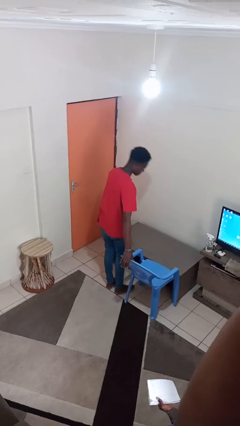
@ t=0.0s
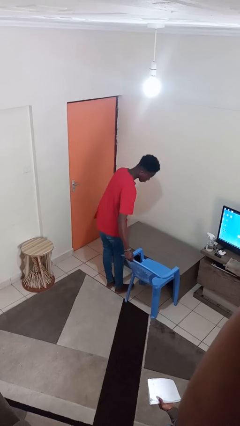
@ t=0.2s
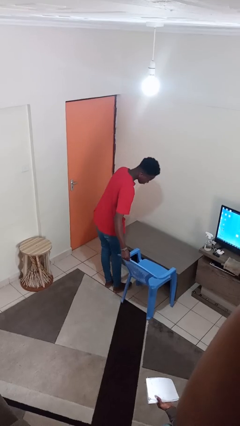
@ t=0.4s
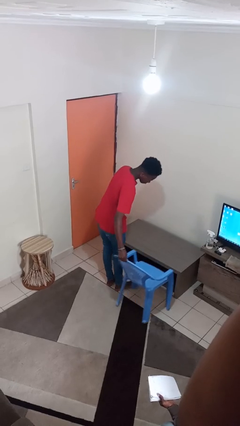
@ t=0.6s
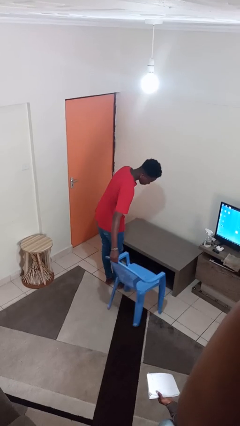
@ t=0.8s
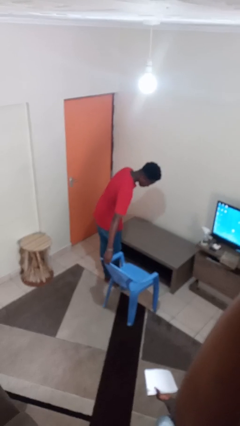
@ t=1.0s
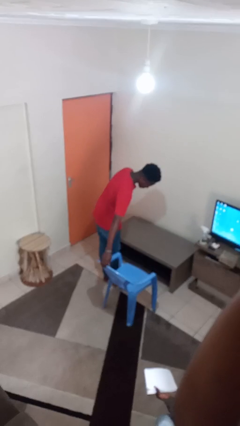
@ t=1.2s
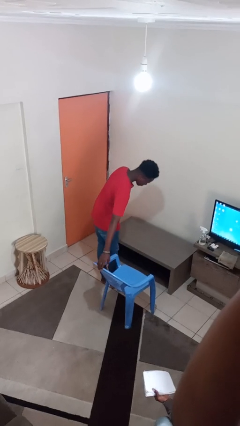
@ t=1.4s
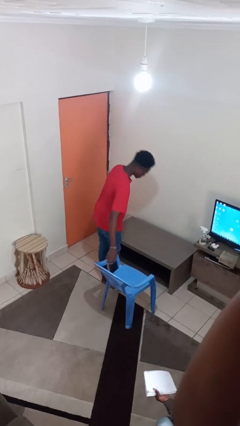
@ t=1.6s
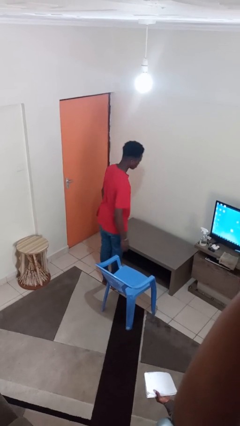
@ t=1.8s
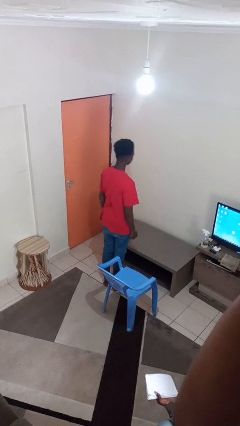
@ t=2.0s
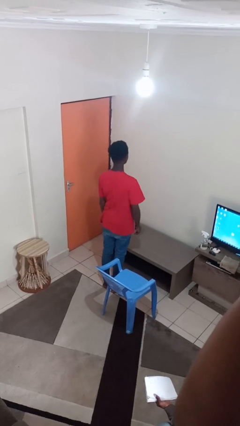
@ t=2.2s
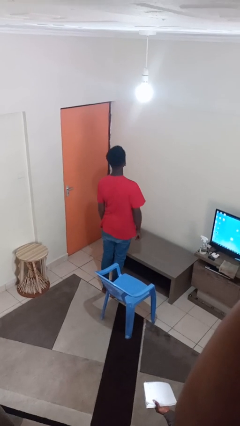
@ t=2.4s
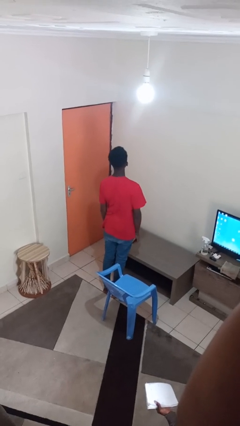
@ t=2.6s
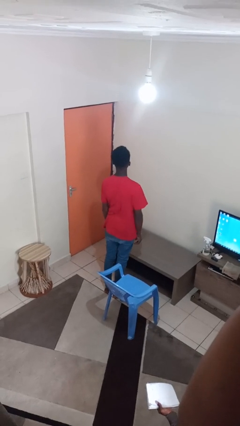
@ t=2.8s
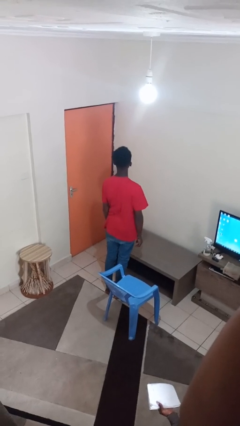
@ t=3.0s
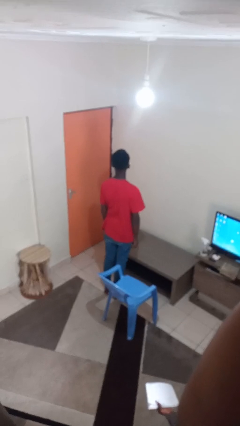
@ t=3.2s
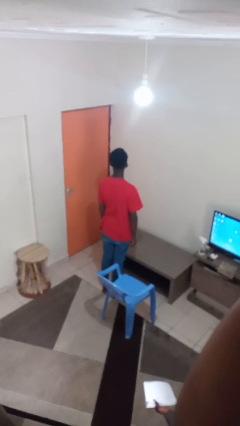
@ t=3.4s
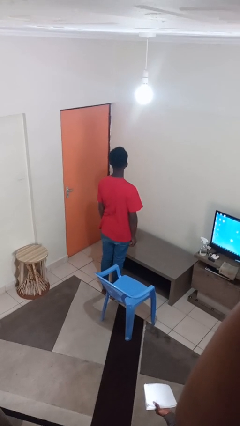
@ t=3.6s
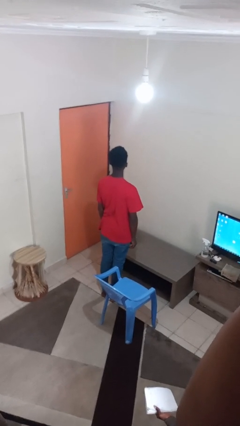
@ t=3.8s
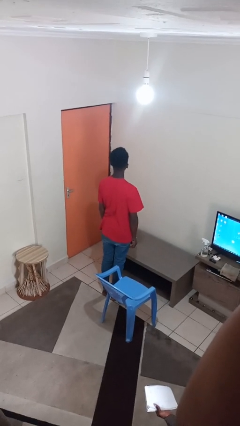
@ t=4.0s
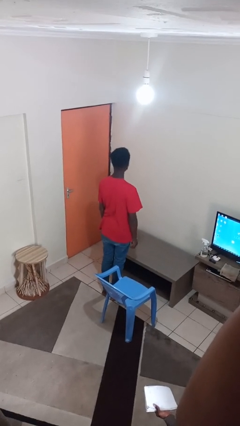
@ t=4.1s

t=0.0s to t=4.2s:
person pulls out chair

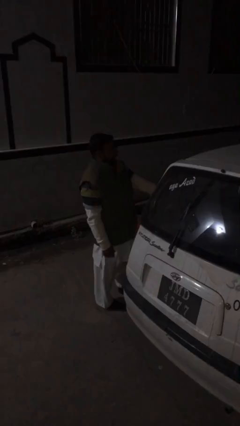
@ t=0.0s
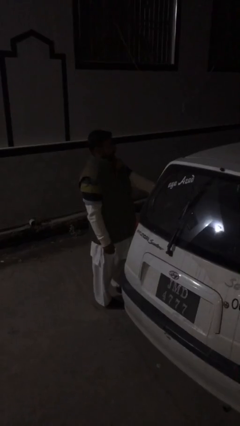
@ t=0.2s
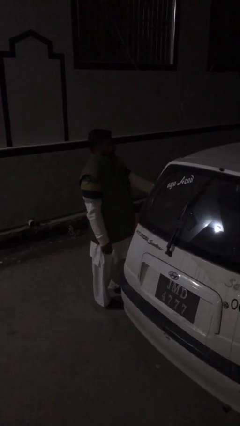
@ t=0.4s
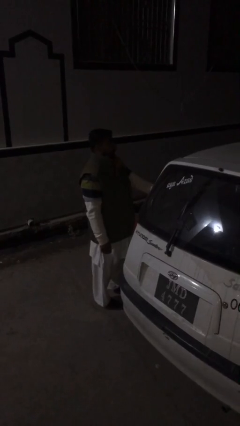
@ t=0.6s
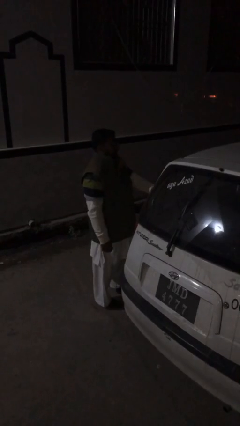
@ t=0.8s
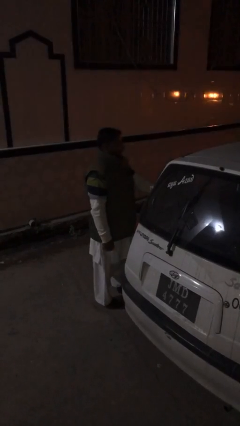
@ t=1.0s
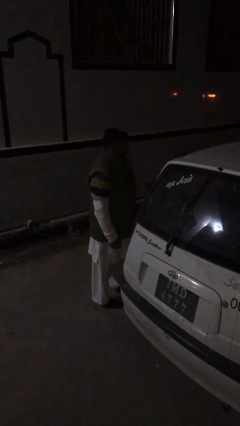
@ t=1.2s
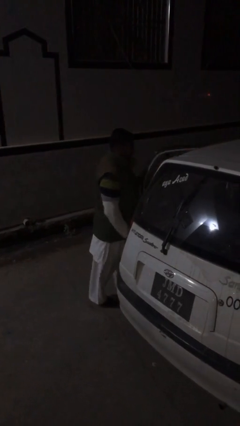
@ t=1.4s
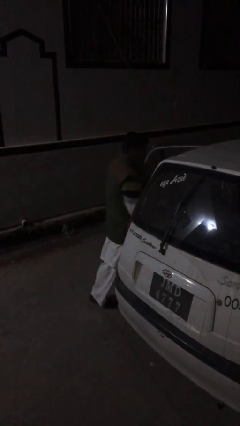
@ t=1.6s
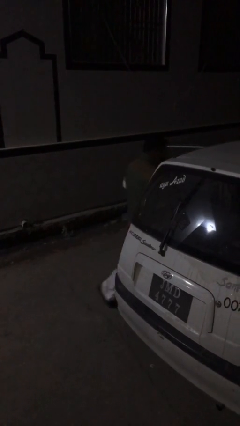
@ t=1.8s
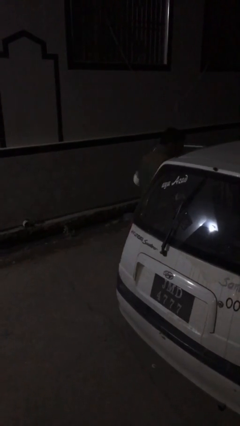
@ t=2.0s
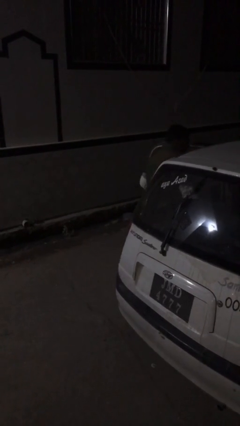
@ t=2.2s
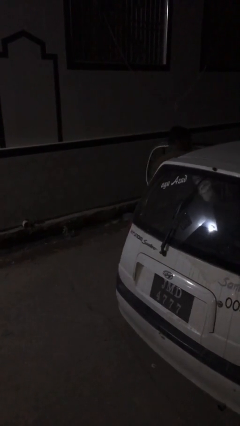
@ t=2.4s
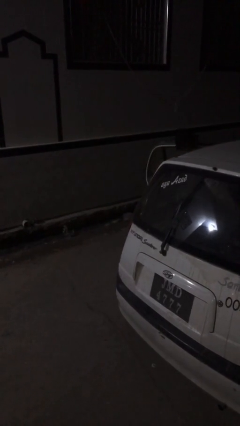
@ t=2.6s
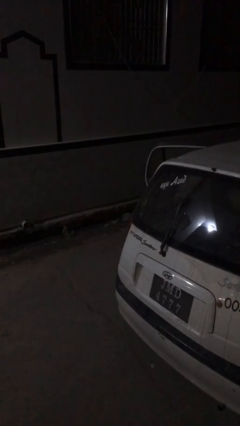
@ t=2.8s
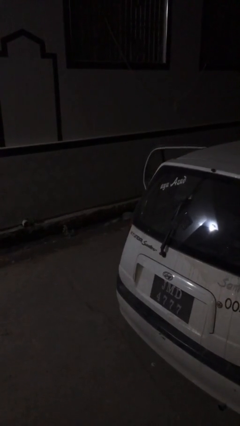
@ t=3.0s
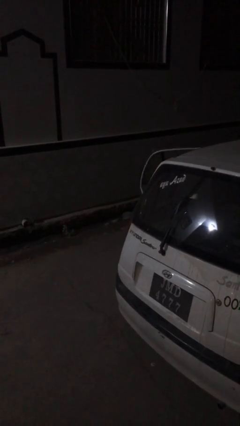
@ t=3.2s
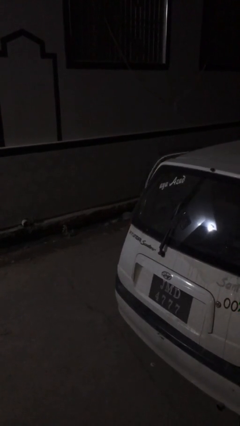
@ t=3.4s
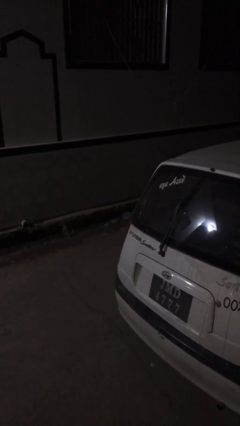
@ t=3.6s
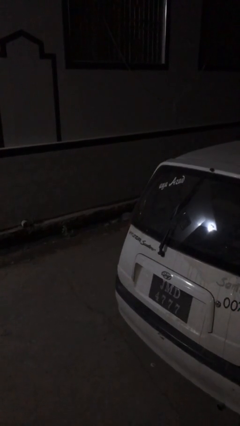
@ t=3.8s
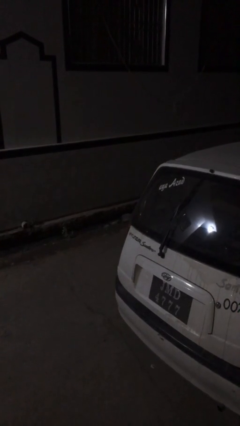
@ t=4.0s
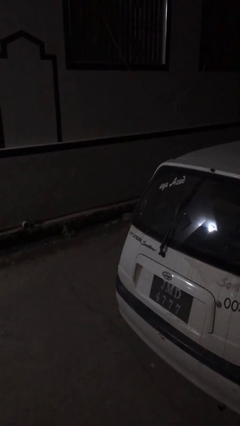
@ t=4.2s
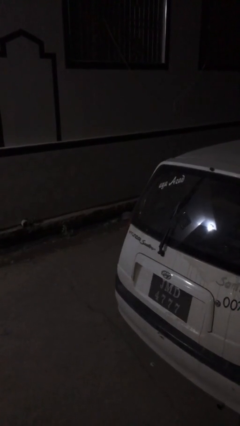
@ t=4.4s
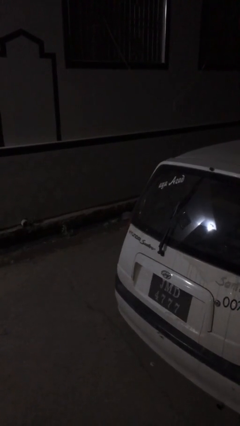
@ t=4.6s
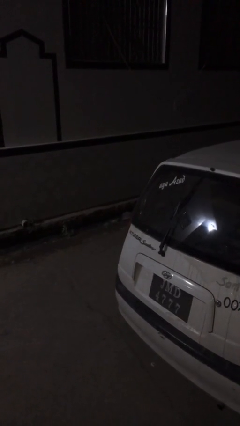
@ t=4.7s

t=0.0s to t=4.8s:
person enters car

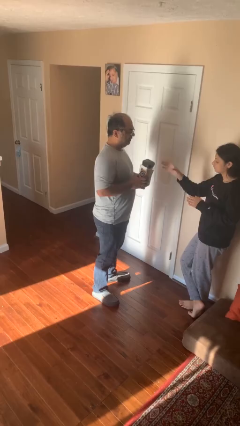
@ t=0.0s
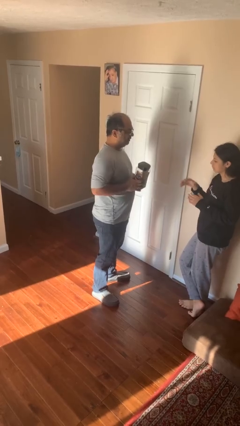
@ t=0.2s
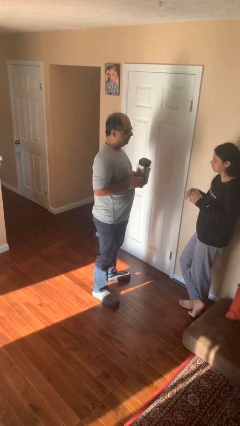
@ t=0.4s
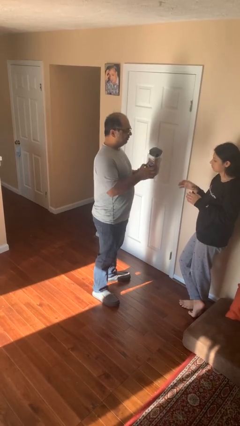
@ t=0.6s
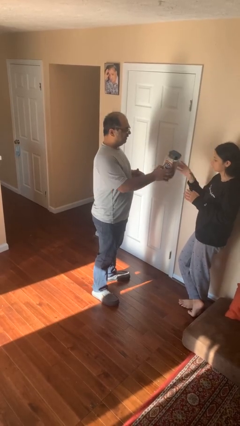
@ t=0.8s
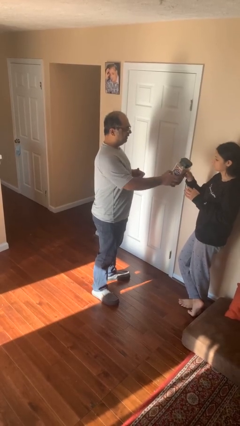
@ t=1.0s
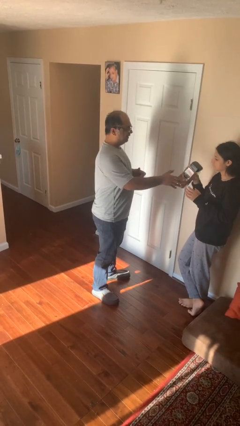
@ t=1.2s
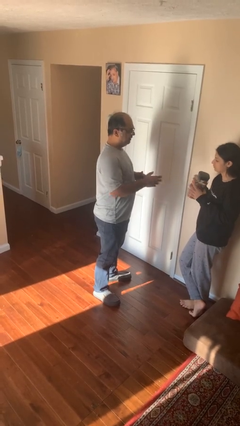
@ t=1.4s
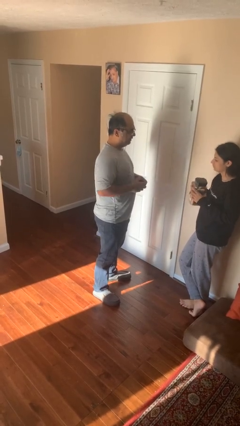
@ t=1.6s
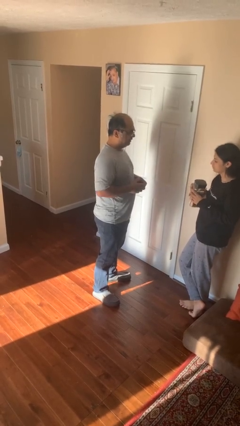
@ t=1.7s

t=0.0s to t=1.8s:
person transfers object to person

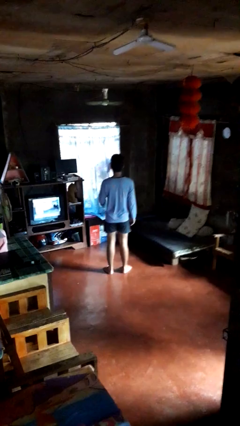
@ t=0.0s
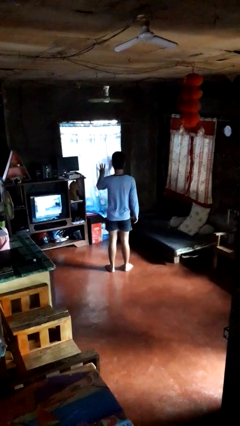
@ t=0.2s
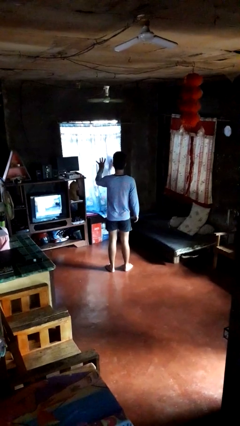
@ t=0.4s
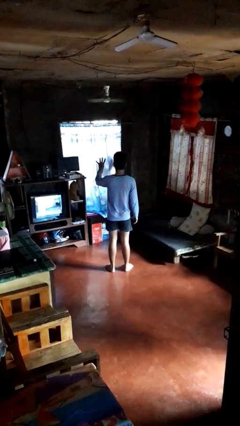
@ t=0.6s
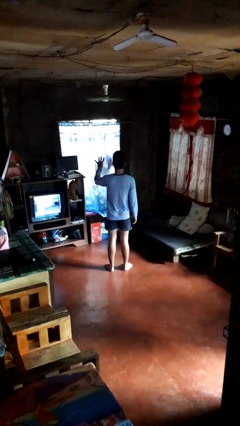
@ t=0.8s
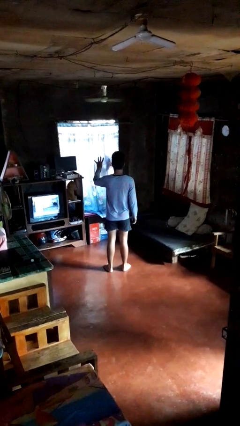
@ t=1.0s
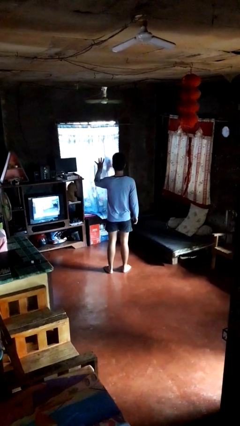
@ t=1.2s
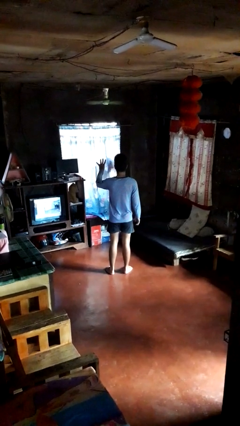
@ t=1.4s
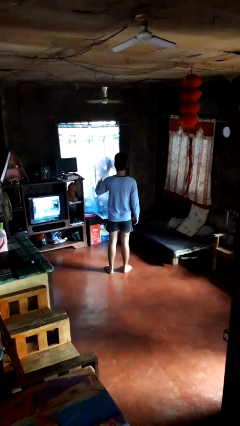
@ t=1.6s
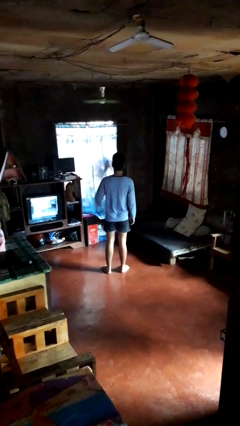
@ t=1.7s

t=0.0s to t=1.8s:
person gestures number four

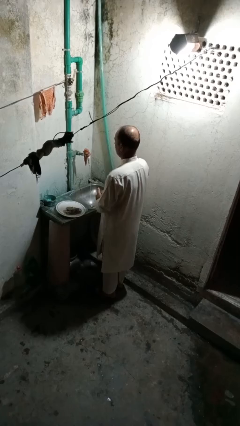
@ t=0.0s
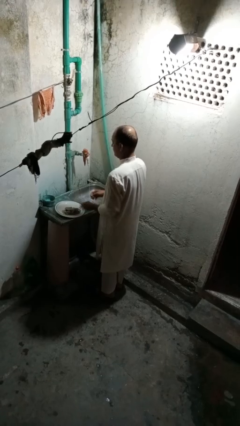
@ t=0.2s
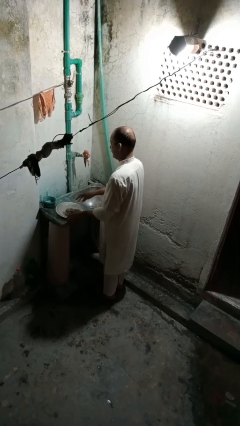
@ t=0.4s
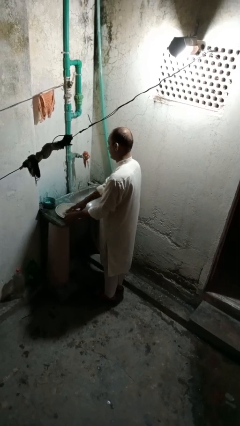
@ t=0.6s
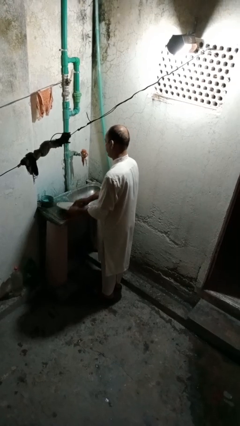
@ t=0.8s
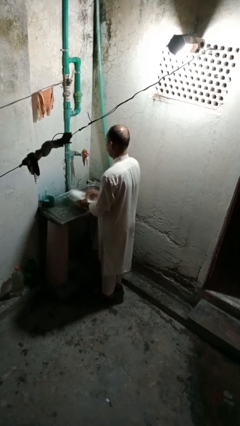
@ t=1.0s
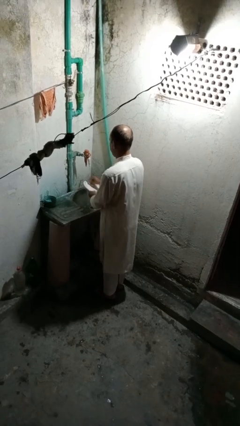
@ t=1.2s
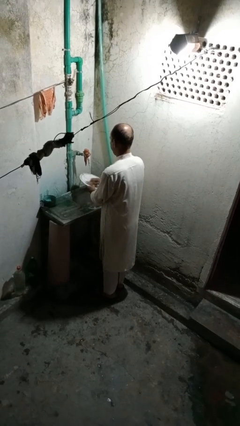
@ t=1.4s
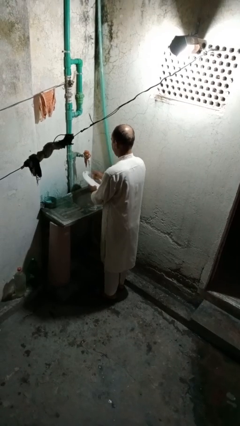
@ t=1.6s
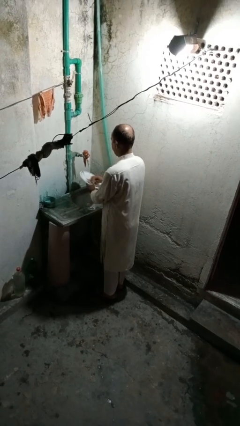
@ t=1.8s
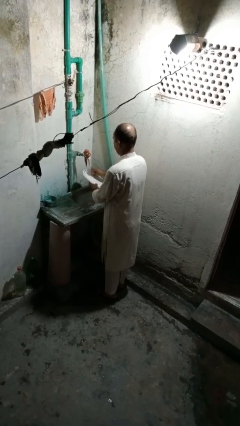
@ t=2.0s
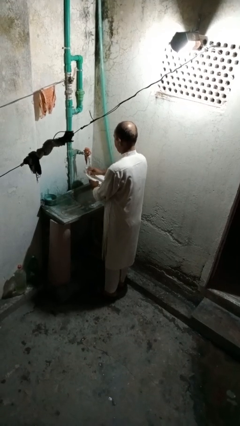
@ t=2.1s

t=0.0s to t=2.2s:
person washes dish

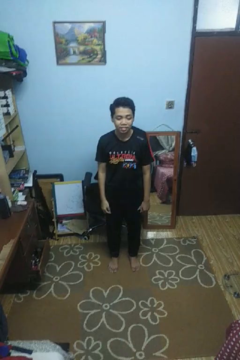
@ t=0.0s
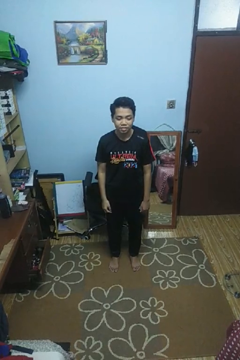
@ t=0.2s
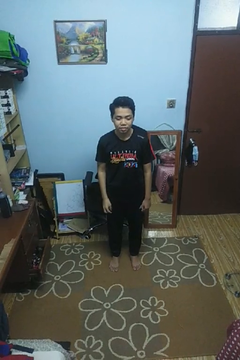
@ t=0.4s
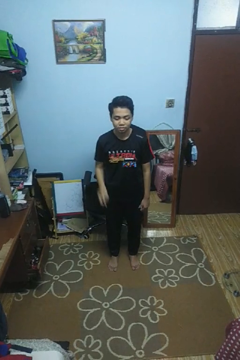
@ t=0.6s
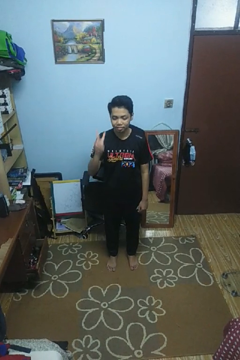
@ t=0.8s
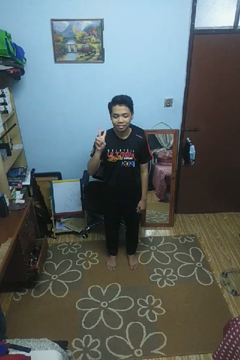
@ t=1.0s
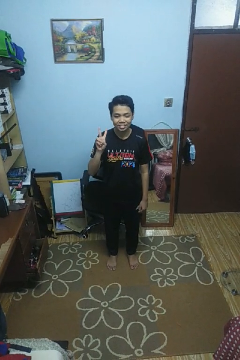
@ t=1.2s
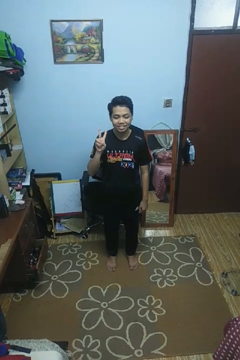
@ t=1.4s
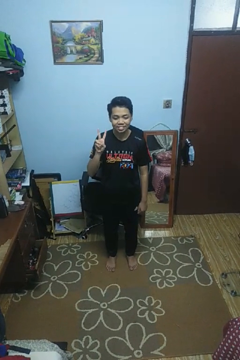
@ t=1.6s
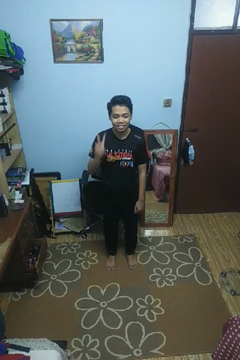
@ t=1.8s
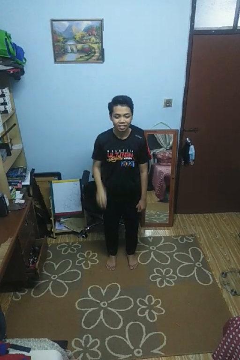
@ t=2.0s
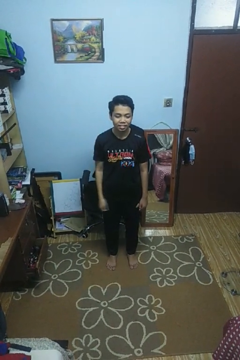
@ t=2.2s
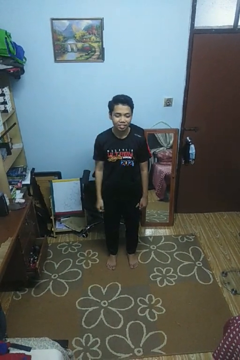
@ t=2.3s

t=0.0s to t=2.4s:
person gestures peace

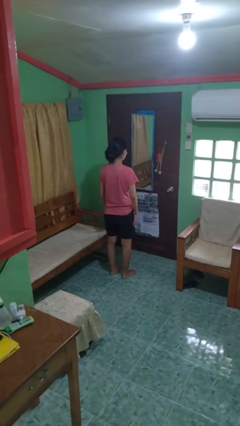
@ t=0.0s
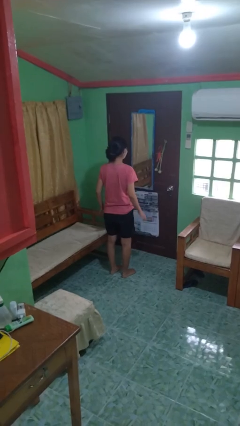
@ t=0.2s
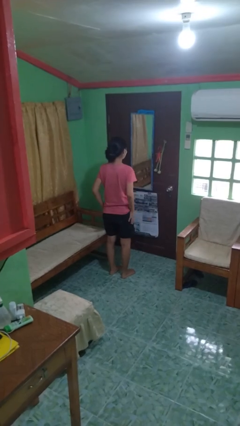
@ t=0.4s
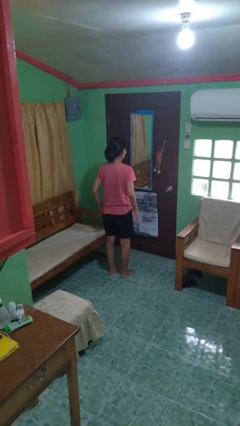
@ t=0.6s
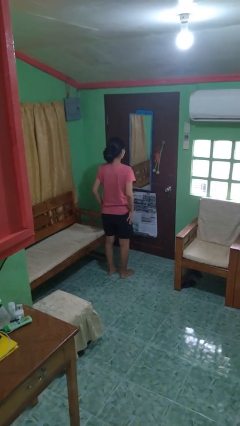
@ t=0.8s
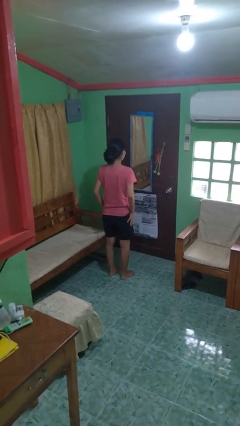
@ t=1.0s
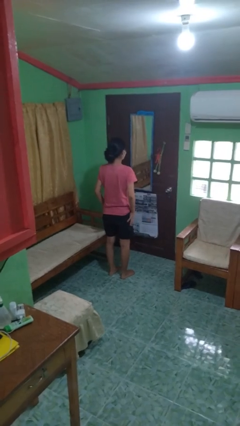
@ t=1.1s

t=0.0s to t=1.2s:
person slaps hands on thighs
